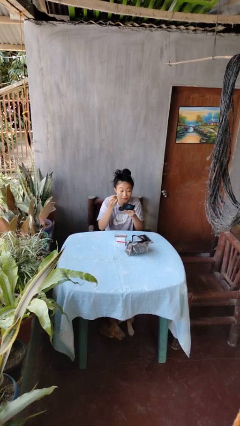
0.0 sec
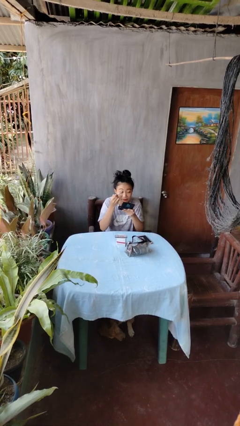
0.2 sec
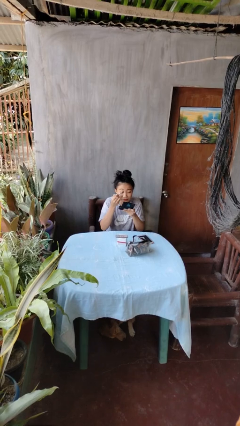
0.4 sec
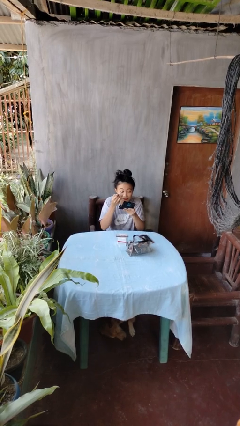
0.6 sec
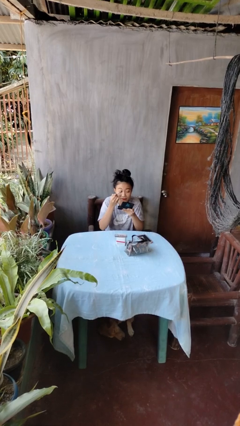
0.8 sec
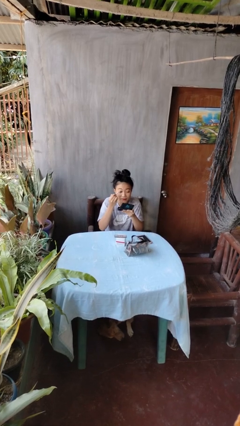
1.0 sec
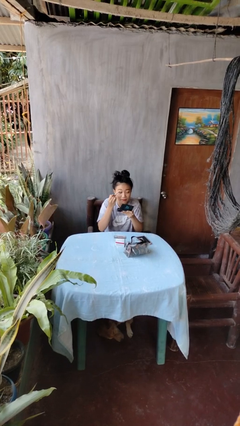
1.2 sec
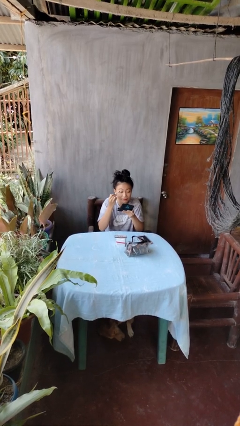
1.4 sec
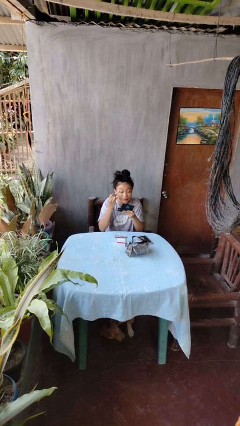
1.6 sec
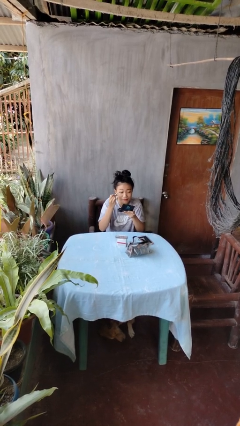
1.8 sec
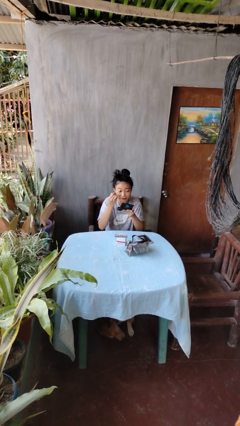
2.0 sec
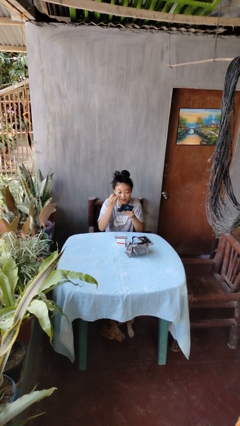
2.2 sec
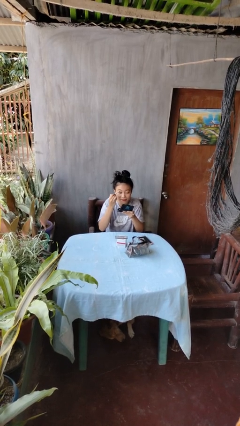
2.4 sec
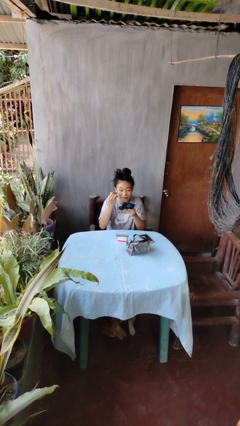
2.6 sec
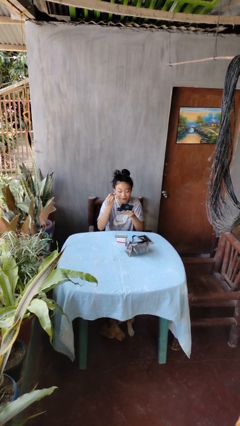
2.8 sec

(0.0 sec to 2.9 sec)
person applies eye makeup

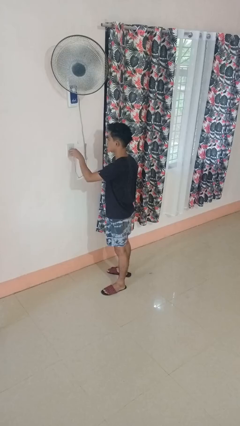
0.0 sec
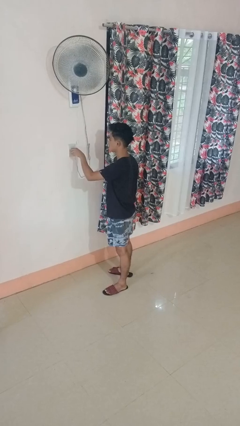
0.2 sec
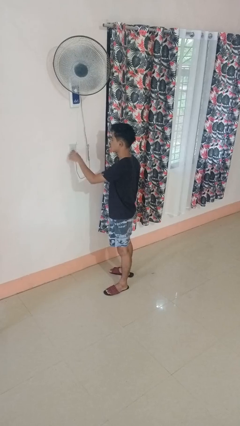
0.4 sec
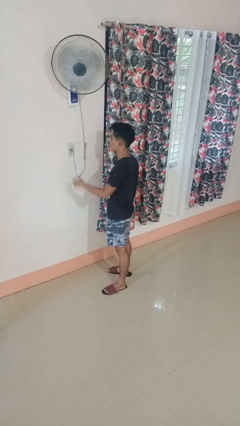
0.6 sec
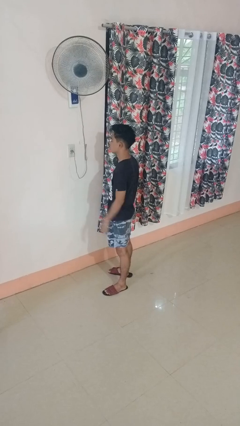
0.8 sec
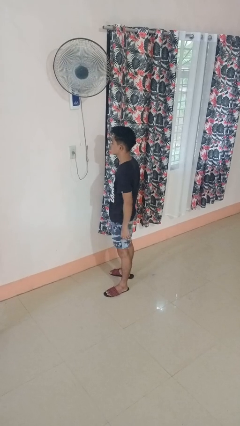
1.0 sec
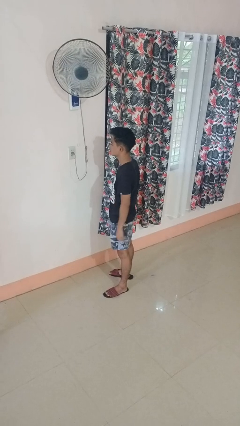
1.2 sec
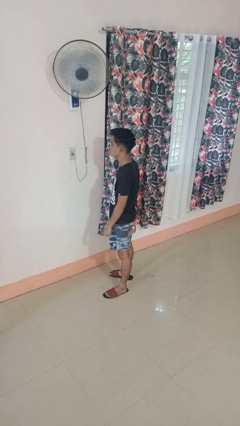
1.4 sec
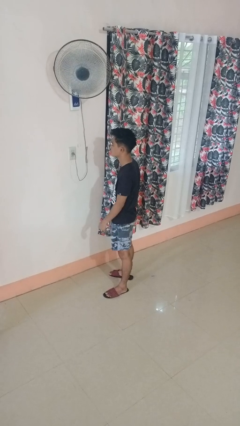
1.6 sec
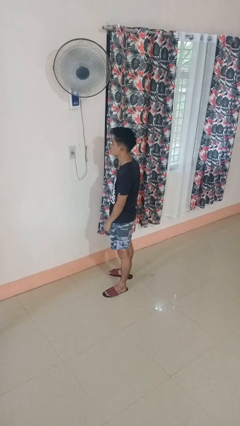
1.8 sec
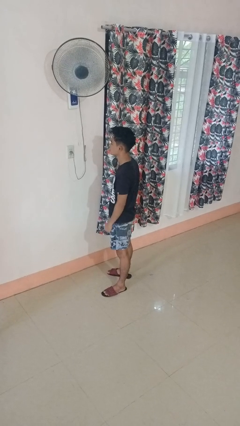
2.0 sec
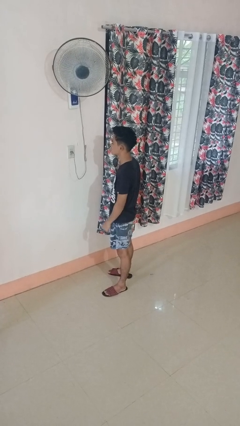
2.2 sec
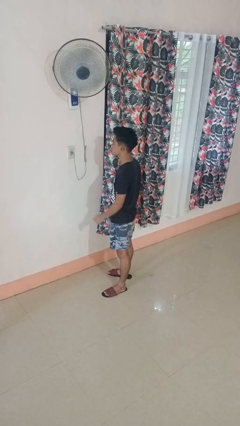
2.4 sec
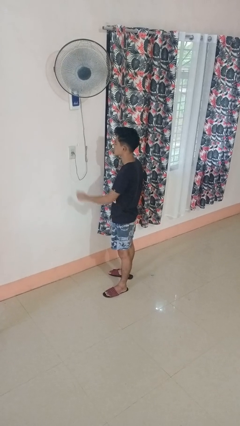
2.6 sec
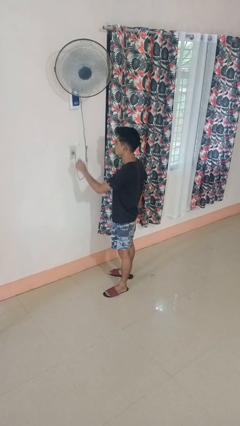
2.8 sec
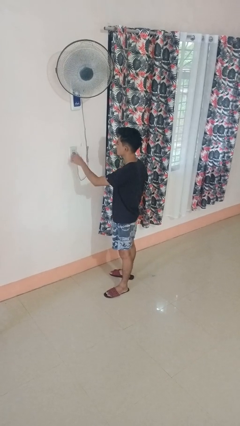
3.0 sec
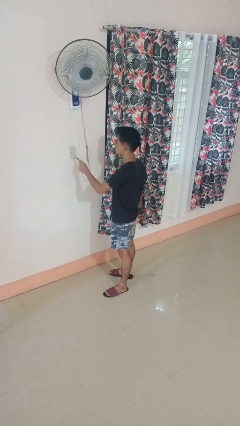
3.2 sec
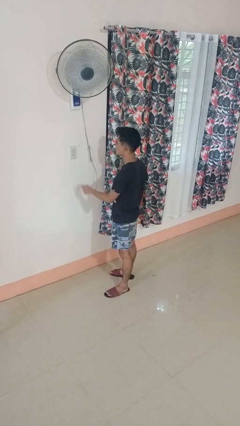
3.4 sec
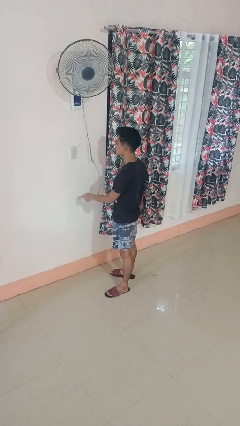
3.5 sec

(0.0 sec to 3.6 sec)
person plugs into electrical socket

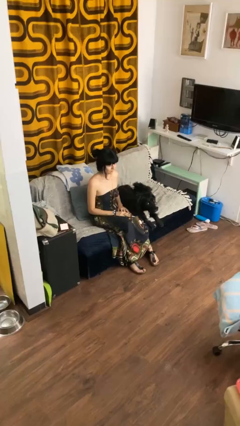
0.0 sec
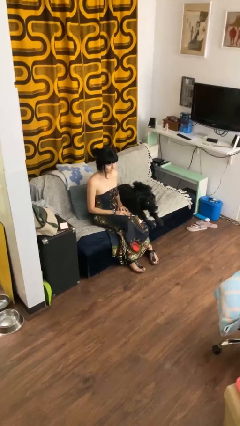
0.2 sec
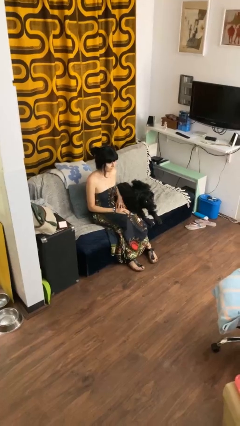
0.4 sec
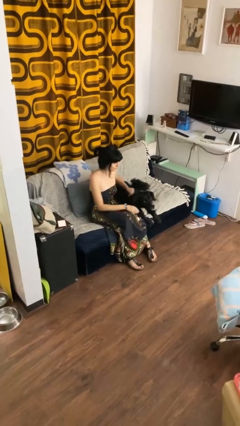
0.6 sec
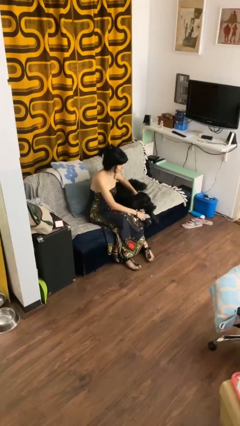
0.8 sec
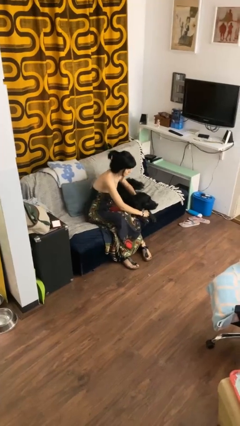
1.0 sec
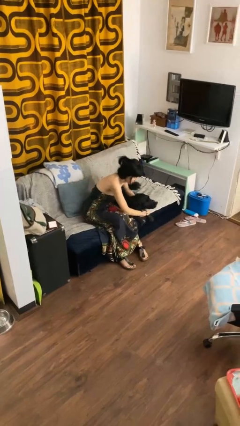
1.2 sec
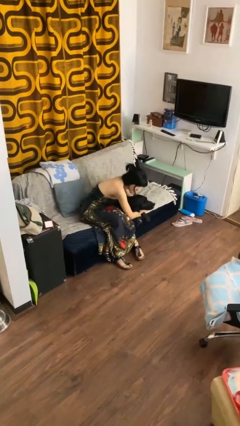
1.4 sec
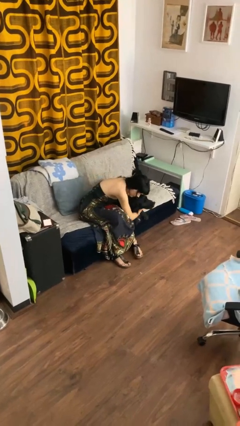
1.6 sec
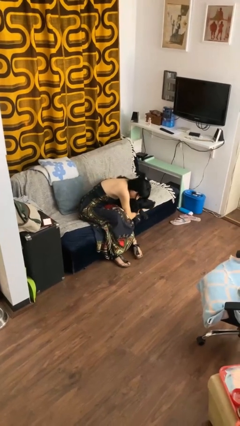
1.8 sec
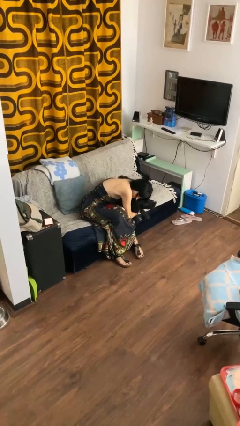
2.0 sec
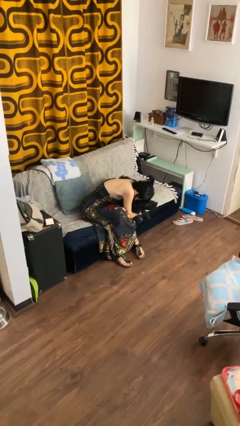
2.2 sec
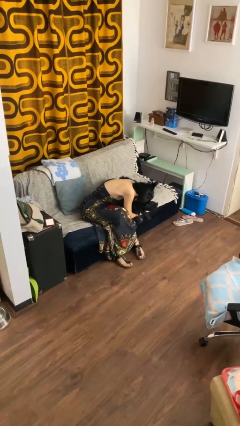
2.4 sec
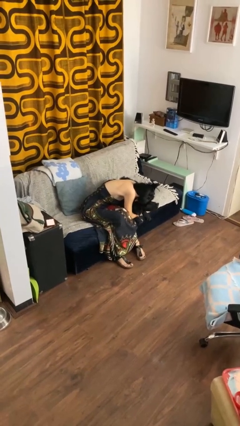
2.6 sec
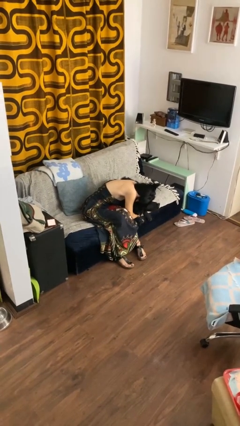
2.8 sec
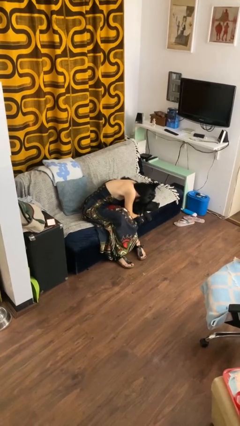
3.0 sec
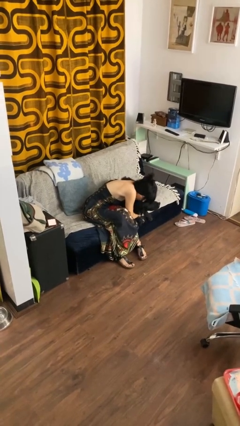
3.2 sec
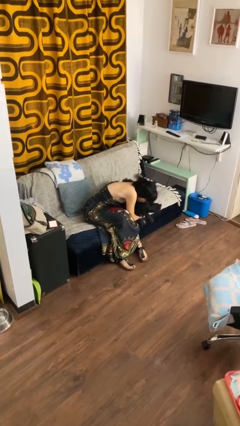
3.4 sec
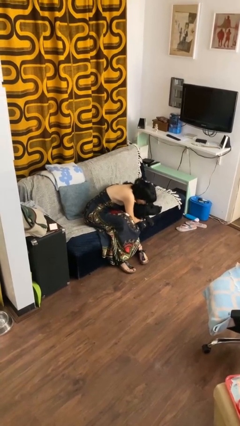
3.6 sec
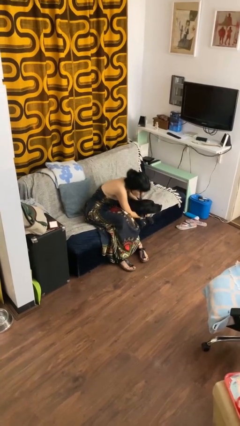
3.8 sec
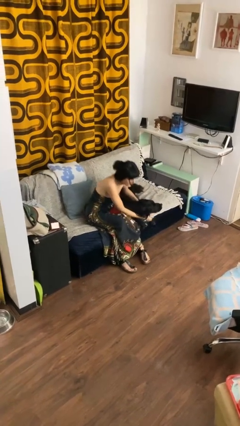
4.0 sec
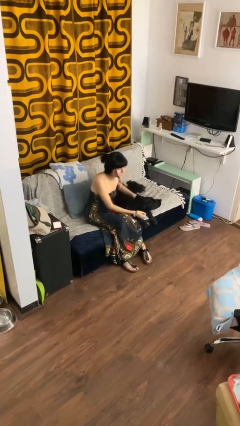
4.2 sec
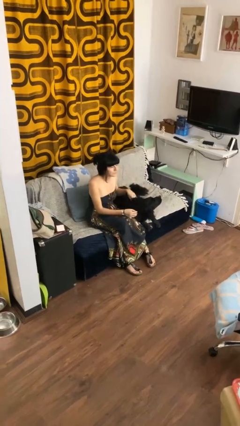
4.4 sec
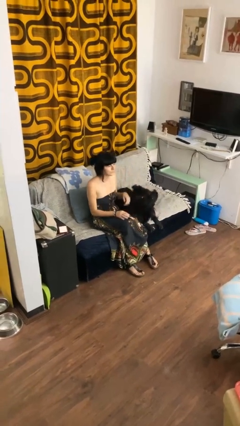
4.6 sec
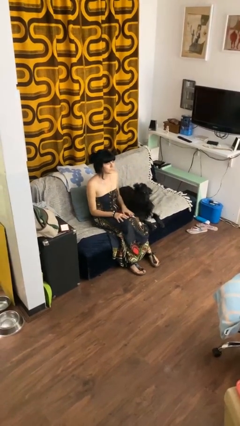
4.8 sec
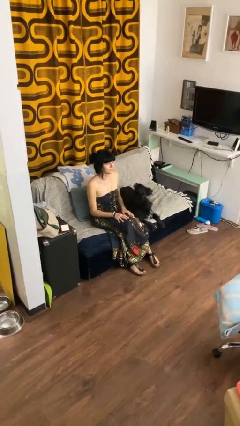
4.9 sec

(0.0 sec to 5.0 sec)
person hugs dog

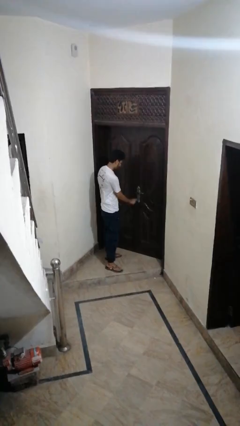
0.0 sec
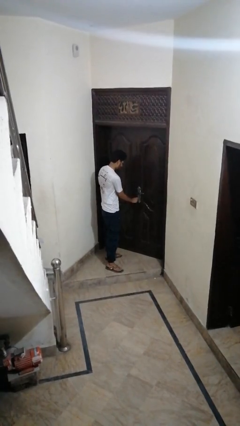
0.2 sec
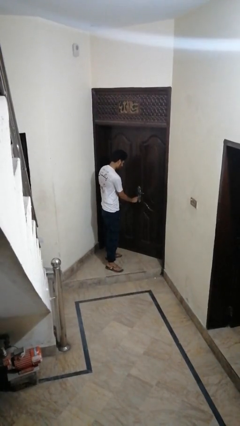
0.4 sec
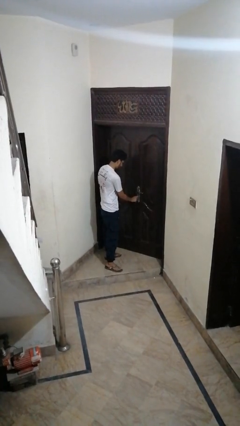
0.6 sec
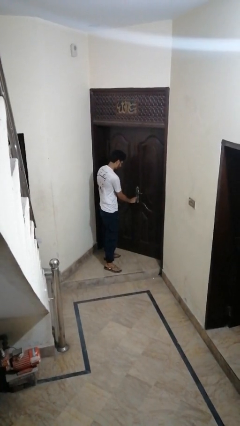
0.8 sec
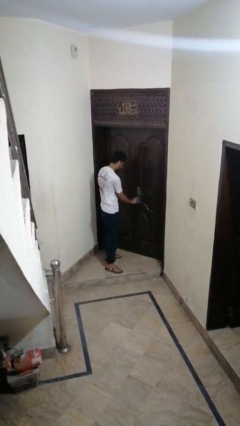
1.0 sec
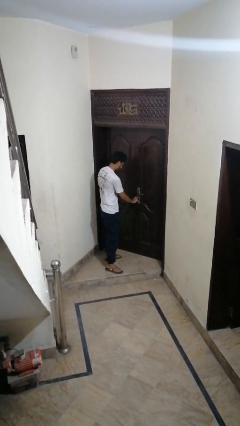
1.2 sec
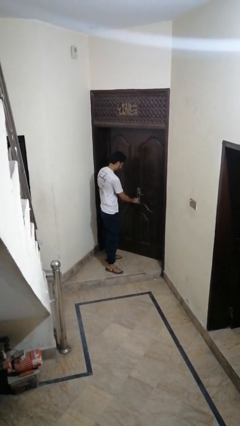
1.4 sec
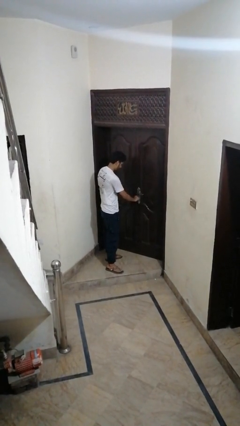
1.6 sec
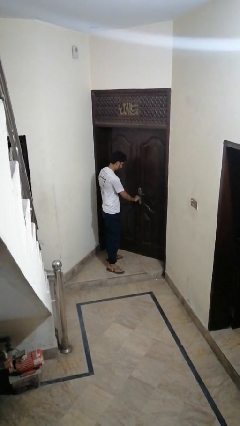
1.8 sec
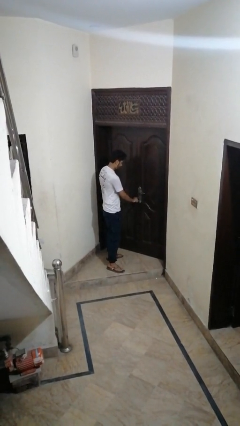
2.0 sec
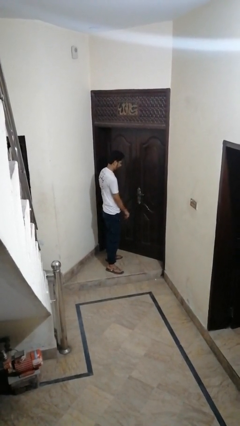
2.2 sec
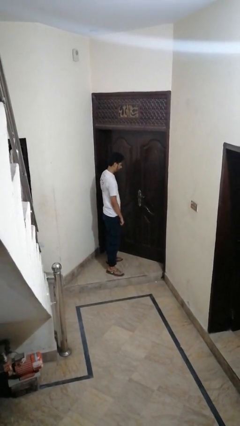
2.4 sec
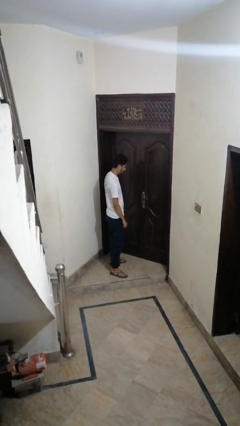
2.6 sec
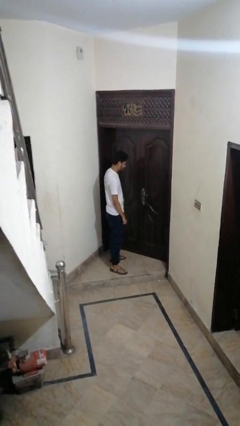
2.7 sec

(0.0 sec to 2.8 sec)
person locks door with keys

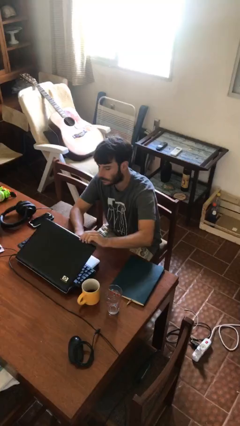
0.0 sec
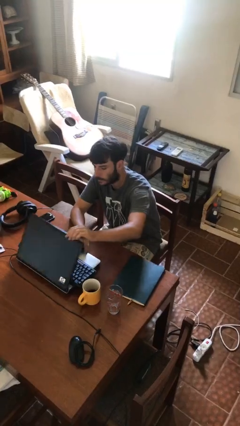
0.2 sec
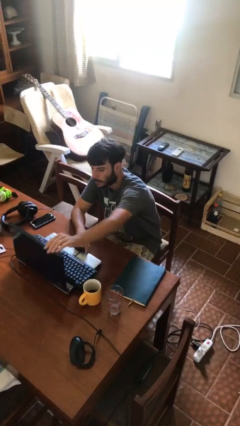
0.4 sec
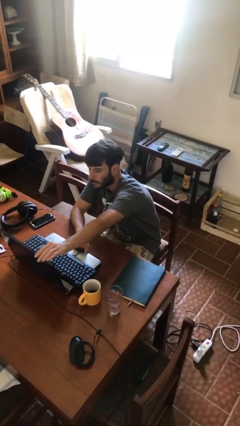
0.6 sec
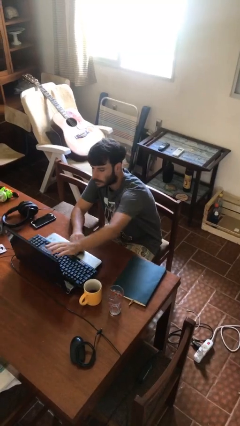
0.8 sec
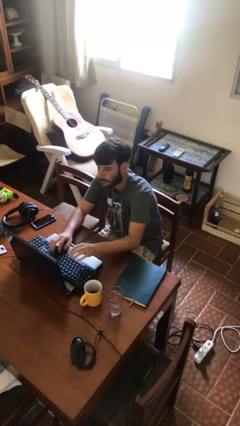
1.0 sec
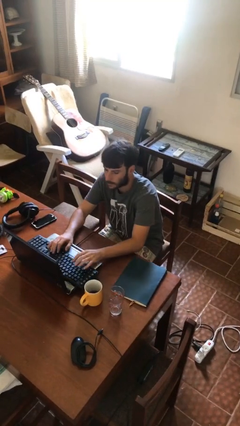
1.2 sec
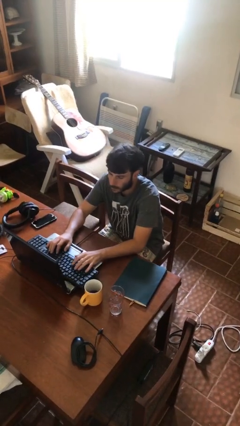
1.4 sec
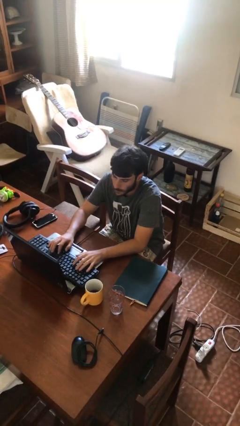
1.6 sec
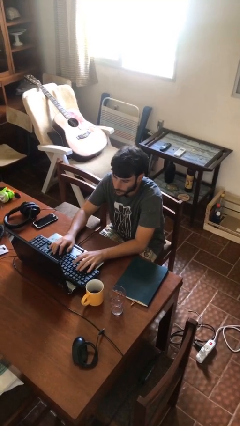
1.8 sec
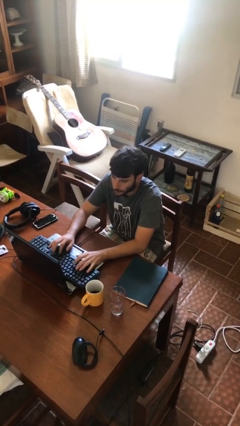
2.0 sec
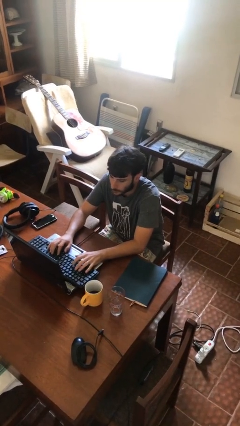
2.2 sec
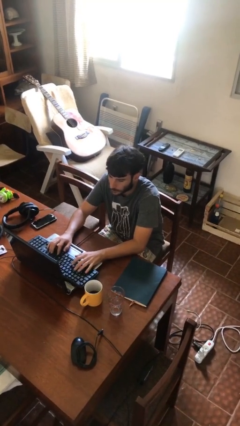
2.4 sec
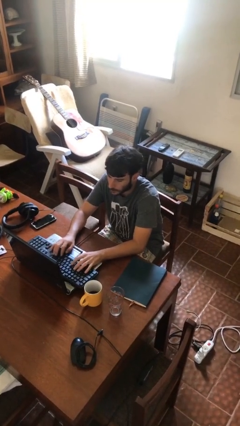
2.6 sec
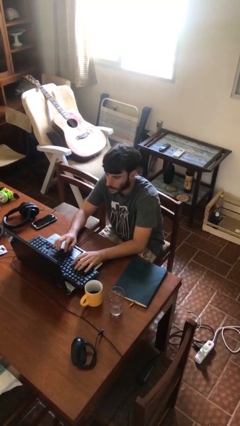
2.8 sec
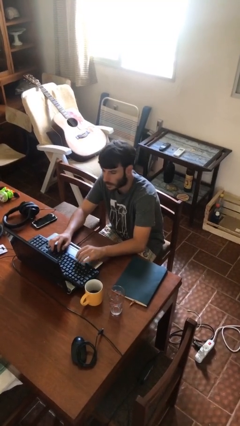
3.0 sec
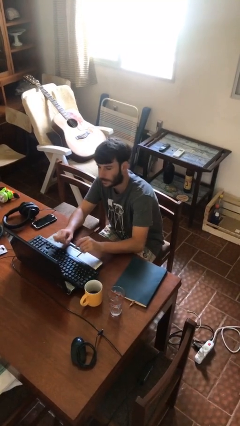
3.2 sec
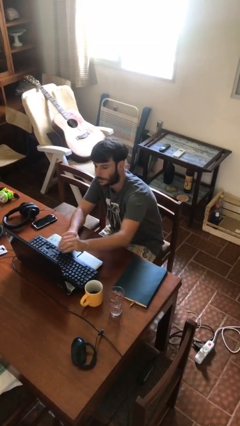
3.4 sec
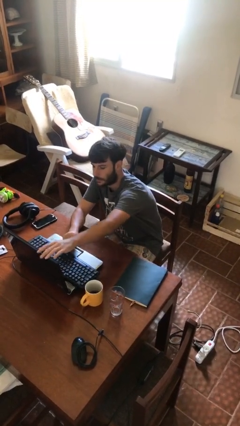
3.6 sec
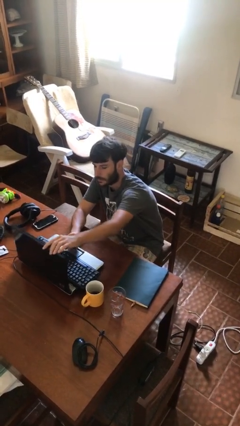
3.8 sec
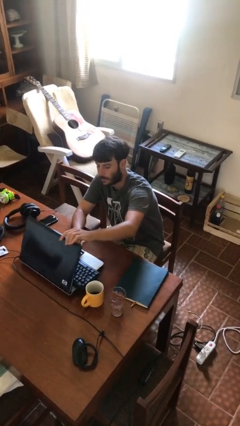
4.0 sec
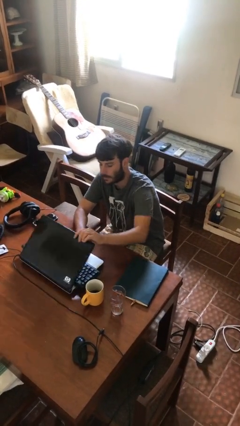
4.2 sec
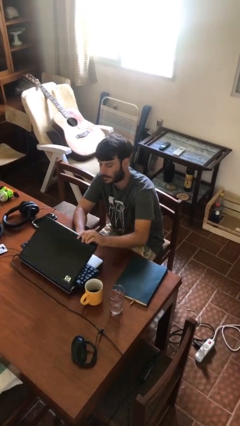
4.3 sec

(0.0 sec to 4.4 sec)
person interacts with laptop
